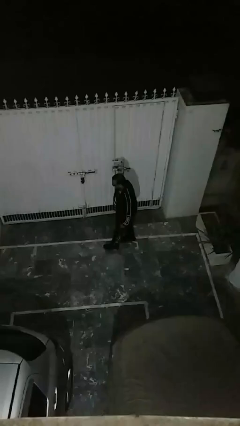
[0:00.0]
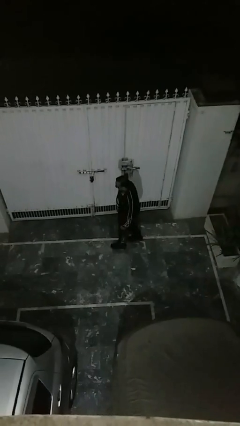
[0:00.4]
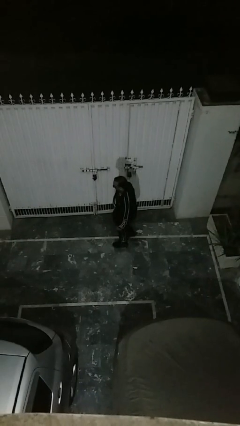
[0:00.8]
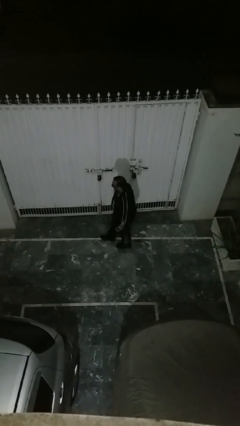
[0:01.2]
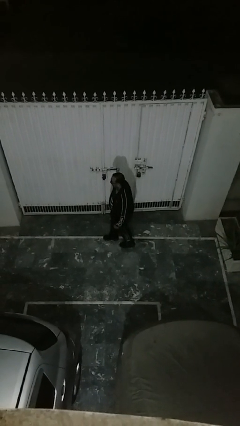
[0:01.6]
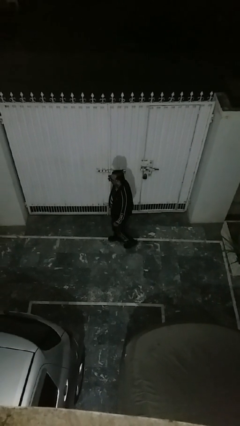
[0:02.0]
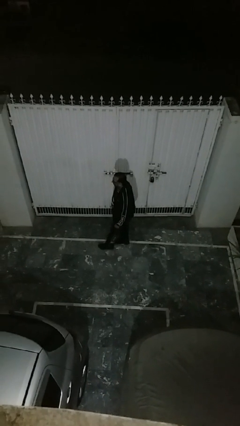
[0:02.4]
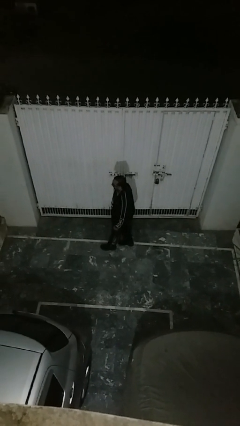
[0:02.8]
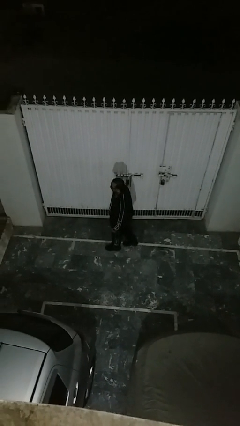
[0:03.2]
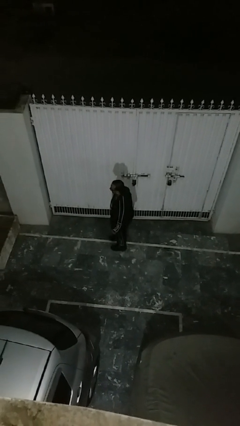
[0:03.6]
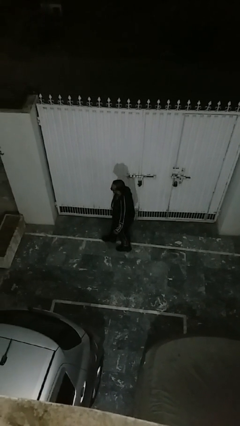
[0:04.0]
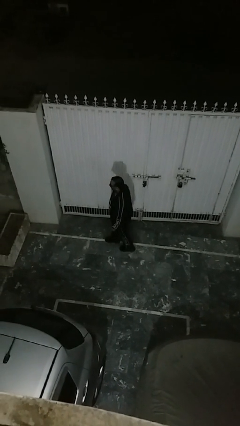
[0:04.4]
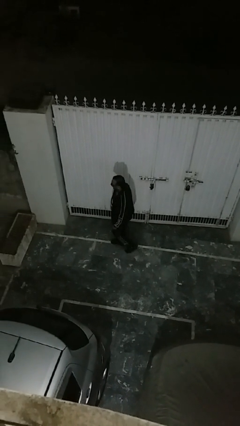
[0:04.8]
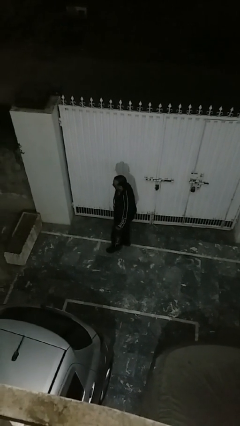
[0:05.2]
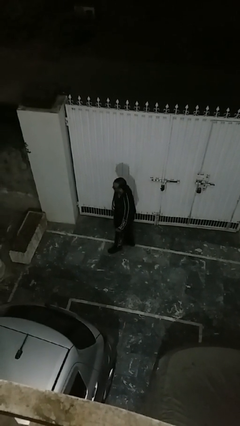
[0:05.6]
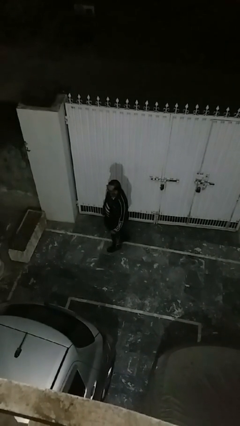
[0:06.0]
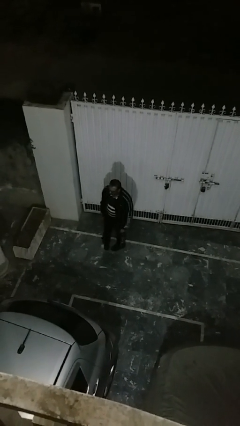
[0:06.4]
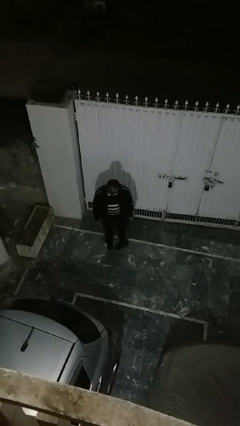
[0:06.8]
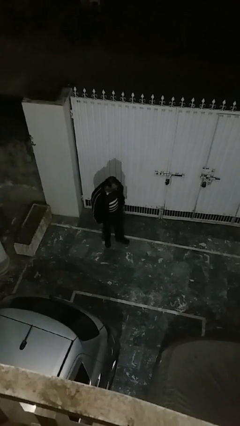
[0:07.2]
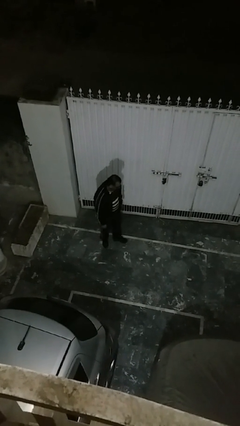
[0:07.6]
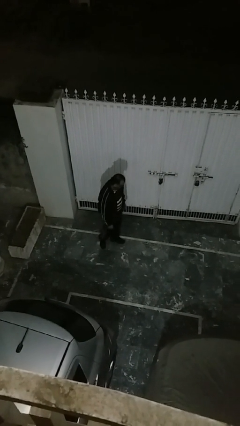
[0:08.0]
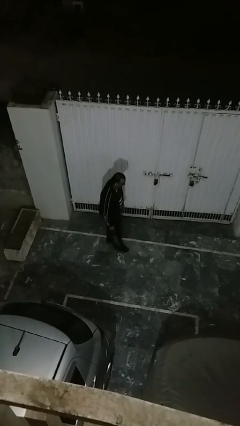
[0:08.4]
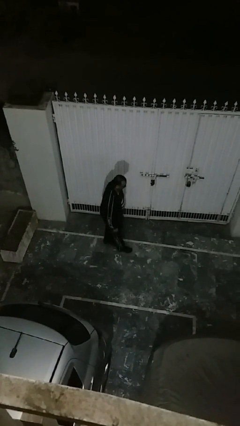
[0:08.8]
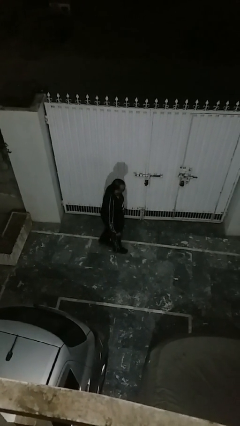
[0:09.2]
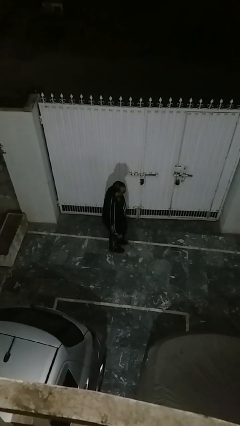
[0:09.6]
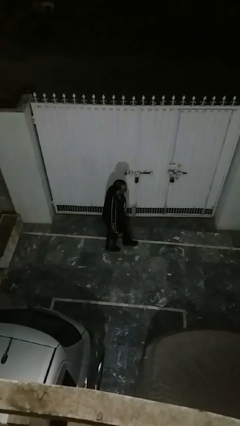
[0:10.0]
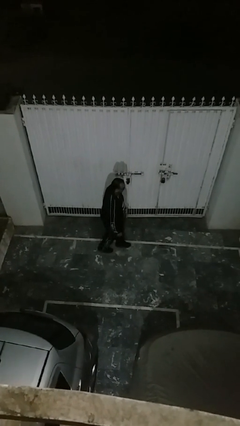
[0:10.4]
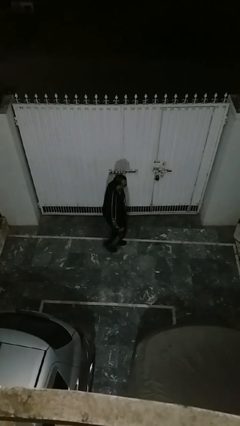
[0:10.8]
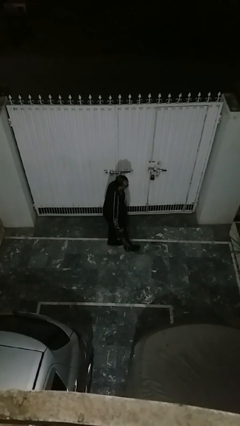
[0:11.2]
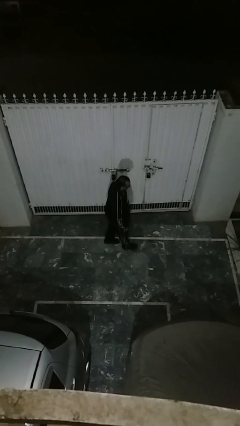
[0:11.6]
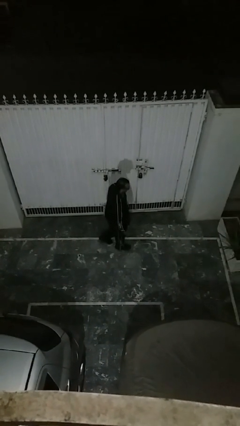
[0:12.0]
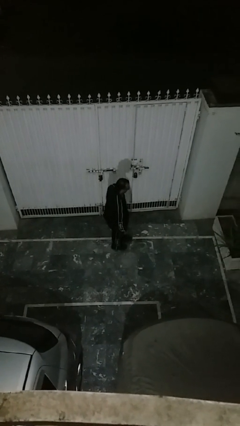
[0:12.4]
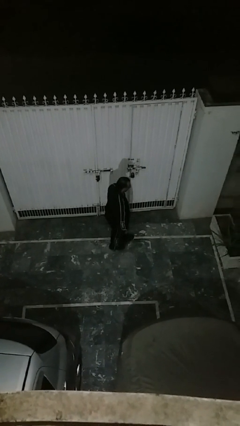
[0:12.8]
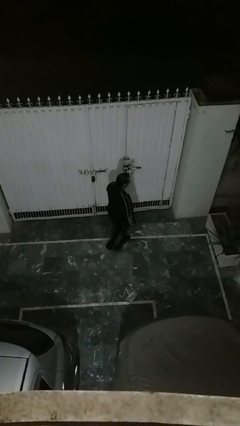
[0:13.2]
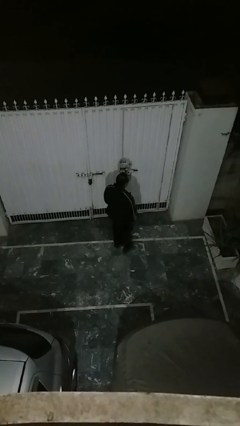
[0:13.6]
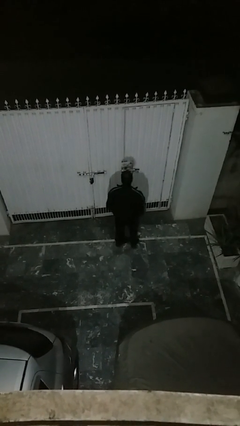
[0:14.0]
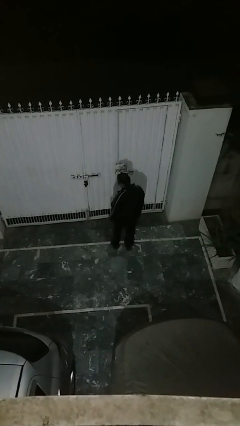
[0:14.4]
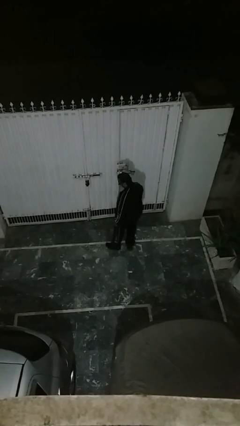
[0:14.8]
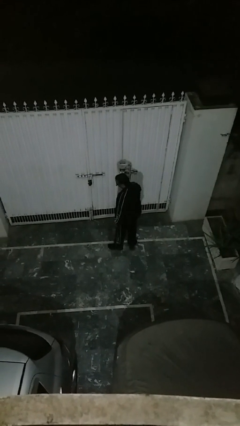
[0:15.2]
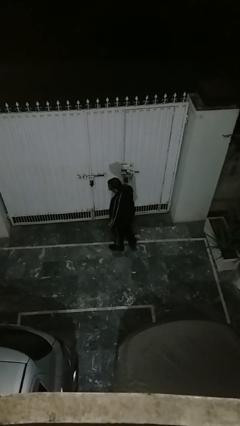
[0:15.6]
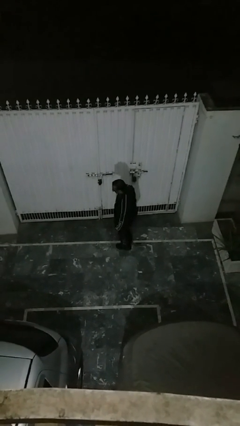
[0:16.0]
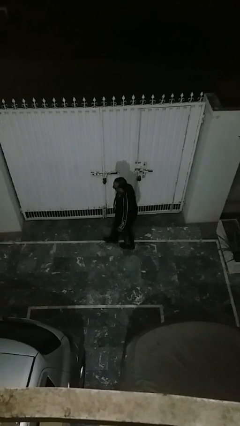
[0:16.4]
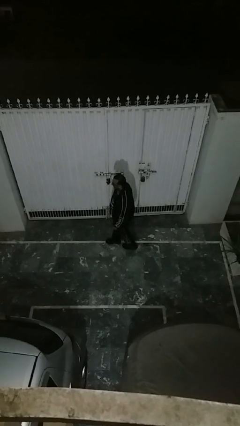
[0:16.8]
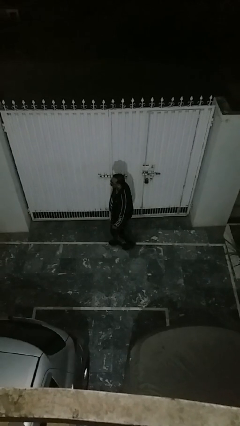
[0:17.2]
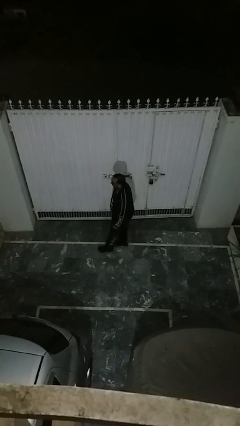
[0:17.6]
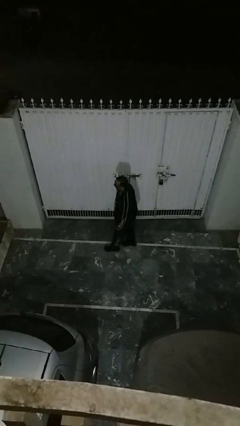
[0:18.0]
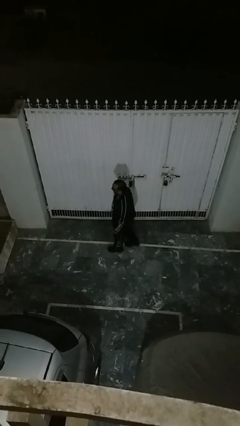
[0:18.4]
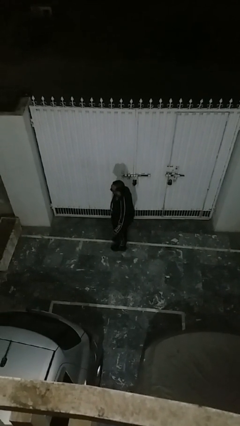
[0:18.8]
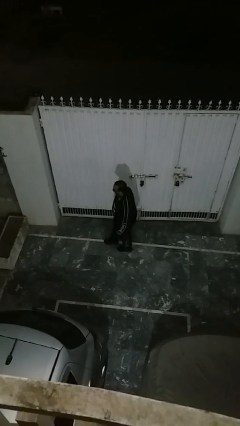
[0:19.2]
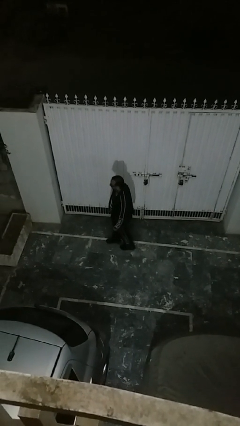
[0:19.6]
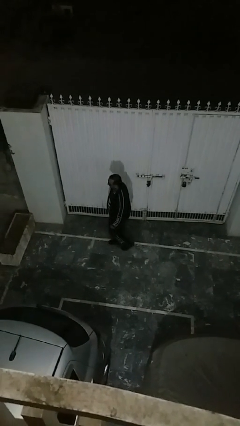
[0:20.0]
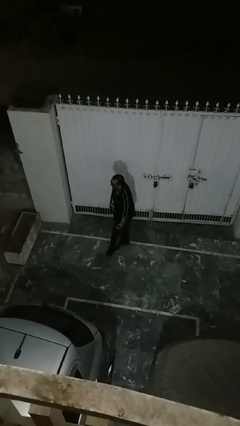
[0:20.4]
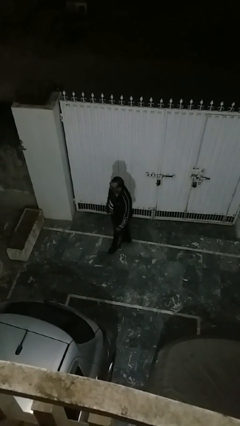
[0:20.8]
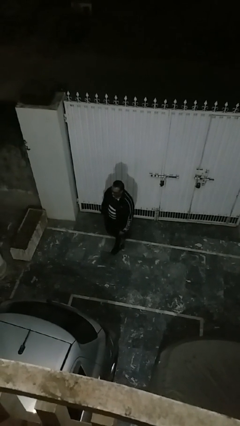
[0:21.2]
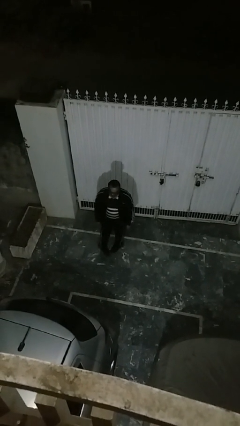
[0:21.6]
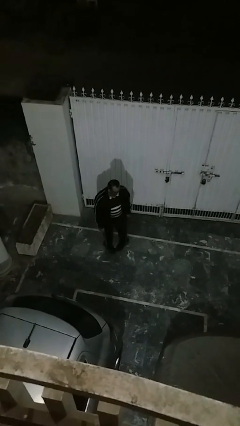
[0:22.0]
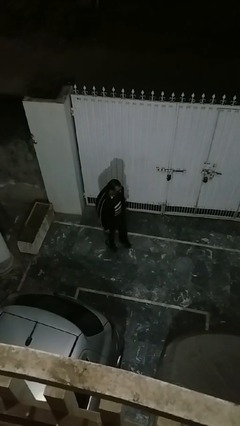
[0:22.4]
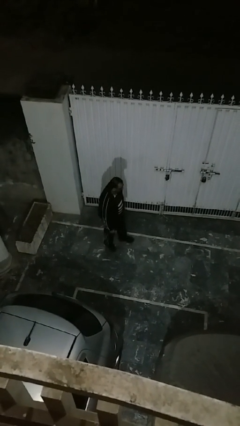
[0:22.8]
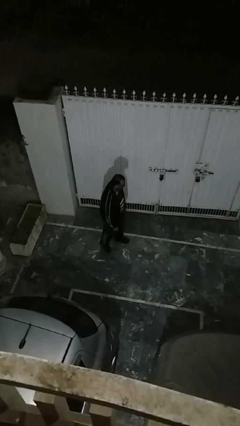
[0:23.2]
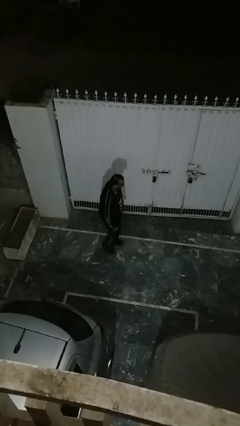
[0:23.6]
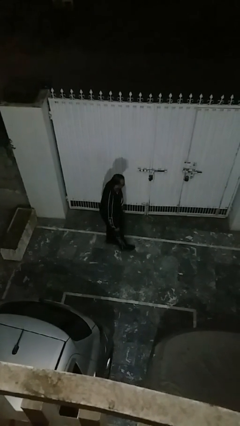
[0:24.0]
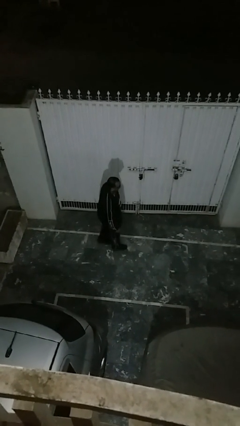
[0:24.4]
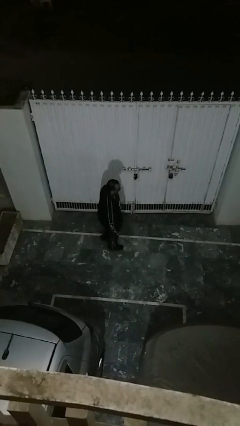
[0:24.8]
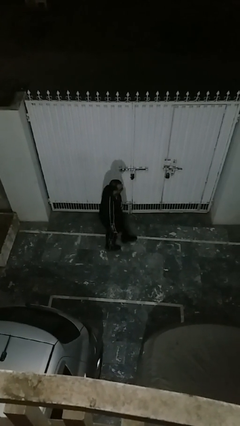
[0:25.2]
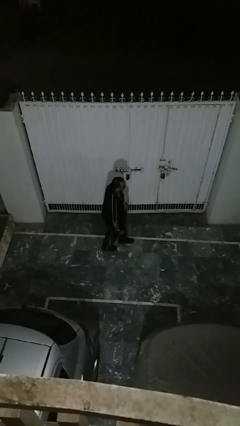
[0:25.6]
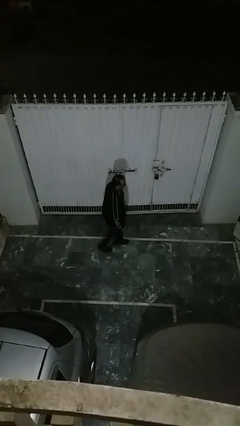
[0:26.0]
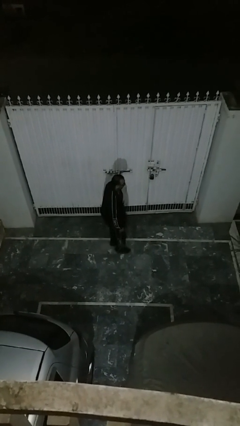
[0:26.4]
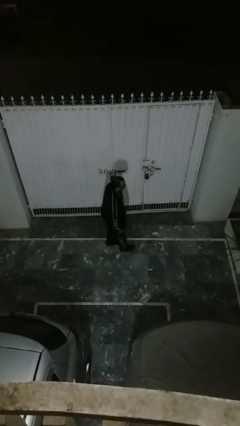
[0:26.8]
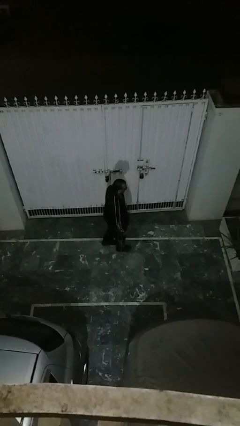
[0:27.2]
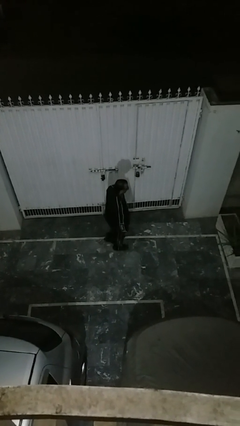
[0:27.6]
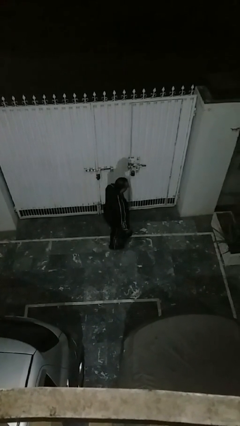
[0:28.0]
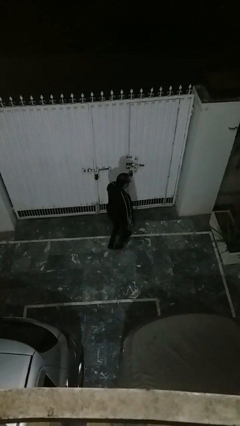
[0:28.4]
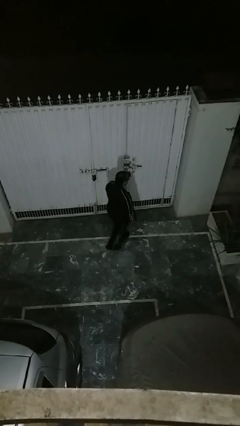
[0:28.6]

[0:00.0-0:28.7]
person walks

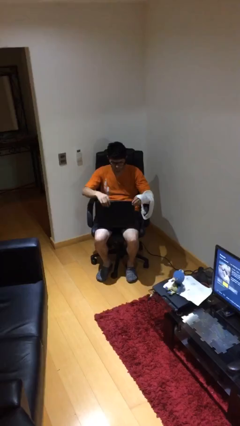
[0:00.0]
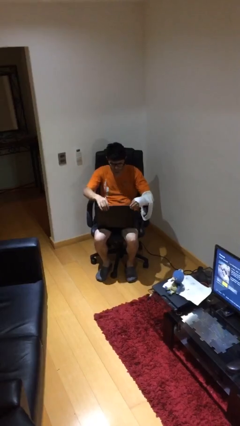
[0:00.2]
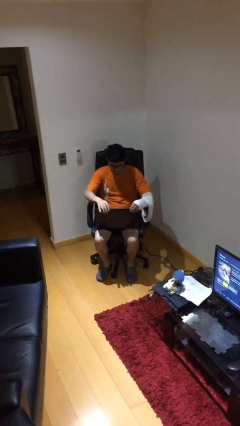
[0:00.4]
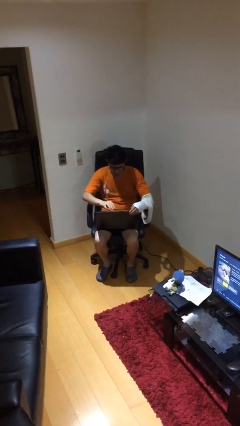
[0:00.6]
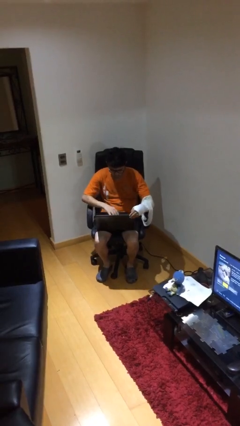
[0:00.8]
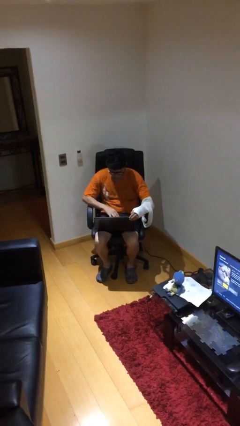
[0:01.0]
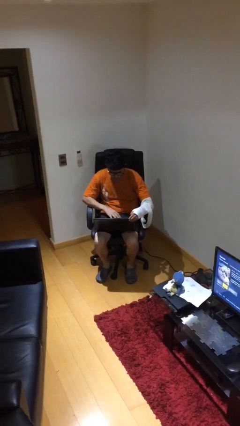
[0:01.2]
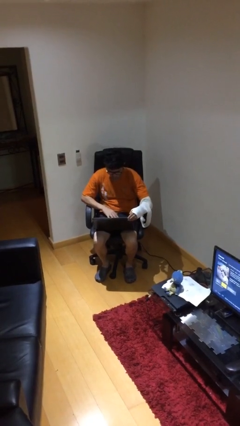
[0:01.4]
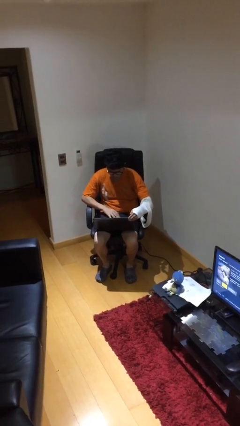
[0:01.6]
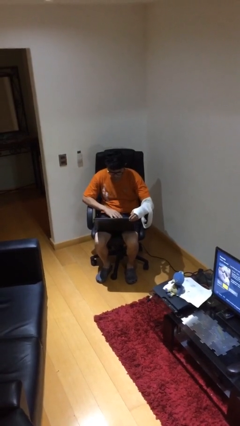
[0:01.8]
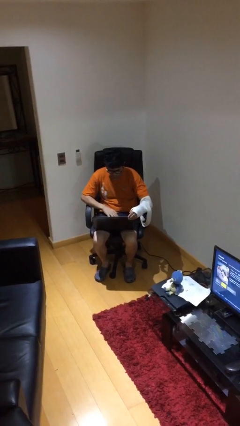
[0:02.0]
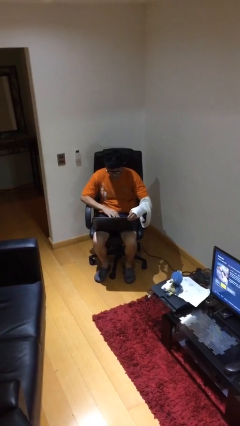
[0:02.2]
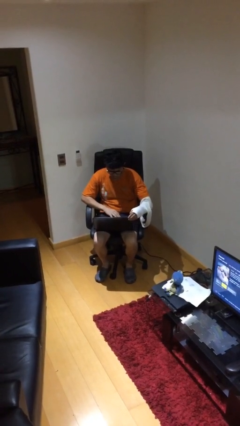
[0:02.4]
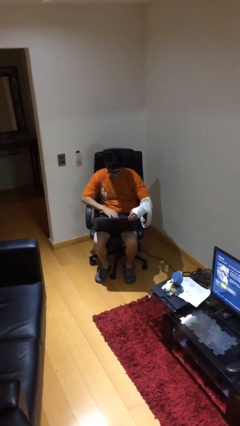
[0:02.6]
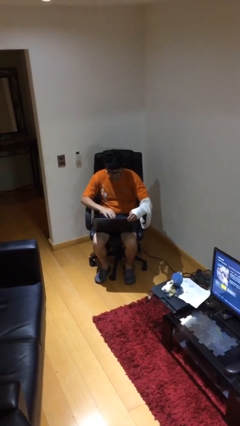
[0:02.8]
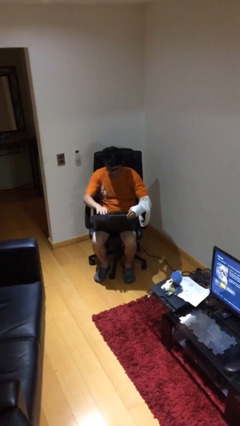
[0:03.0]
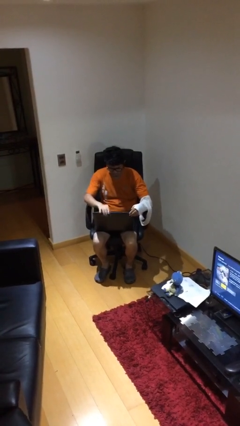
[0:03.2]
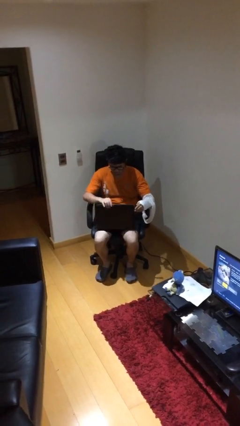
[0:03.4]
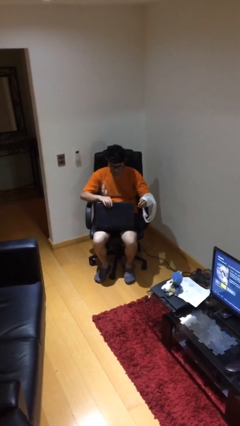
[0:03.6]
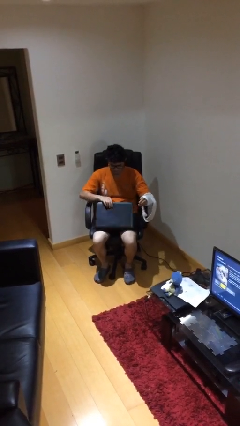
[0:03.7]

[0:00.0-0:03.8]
person interacts with laptop
